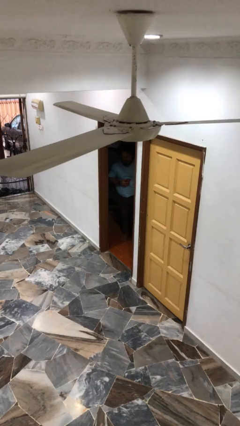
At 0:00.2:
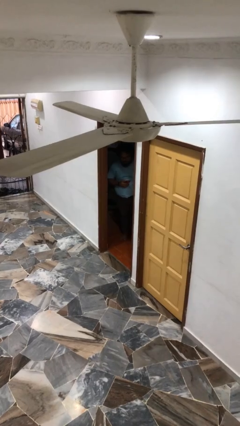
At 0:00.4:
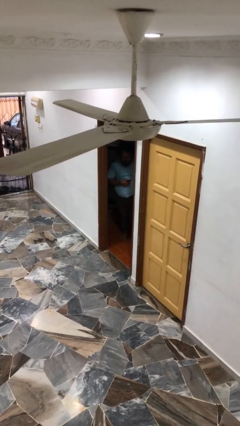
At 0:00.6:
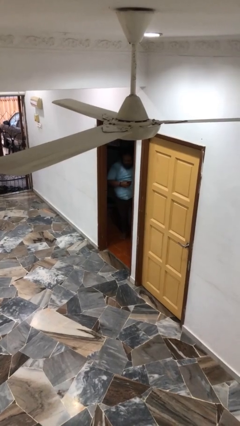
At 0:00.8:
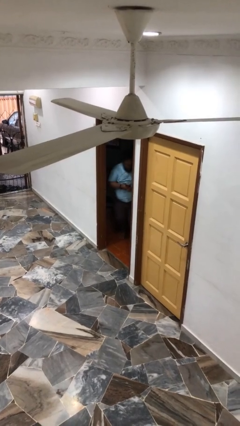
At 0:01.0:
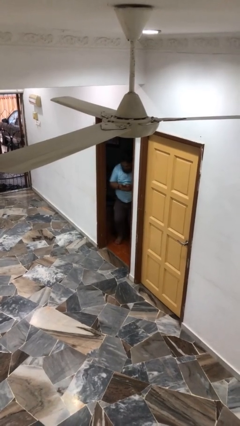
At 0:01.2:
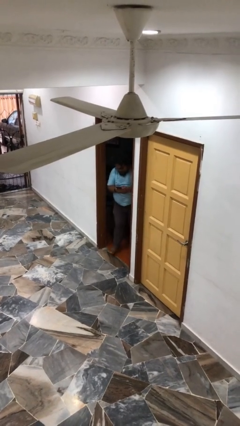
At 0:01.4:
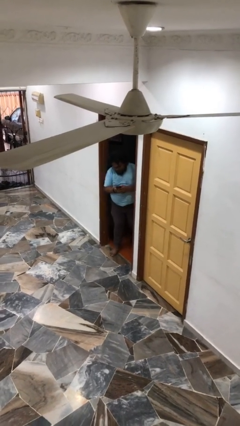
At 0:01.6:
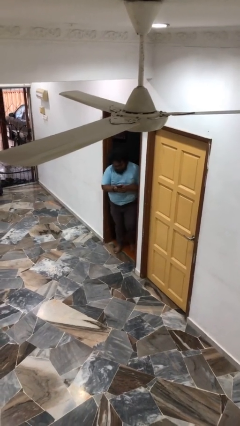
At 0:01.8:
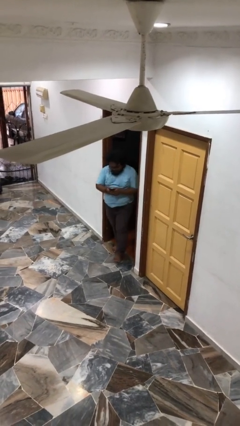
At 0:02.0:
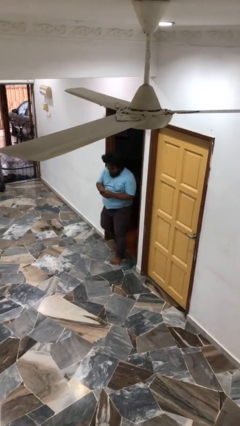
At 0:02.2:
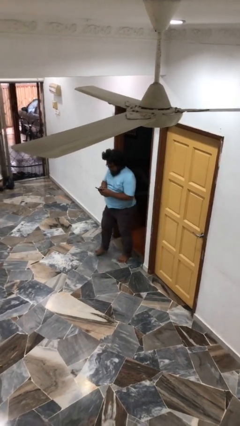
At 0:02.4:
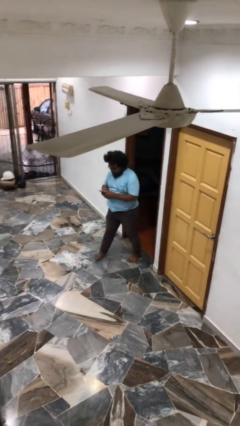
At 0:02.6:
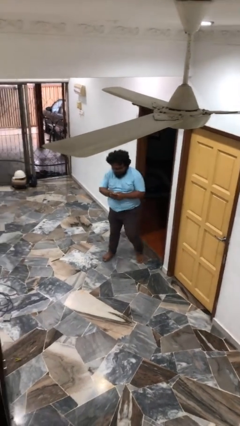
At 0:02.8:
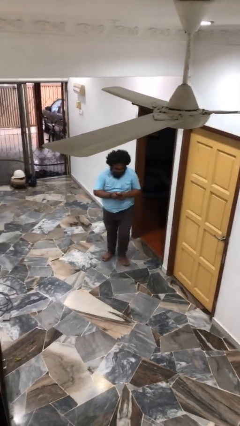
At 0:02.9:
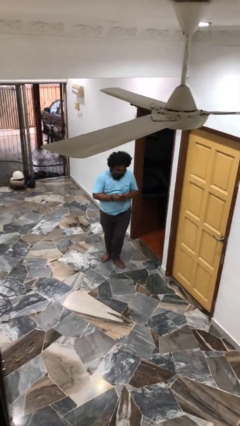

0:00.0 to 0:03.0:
person enters scene through structure

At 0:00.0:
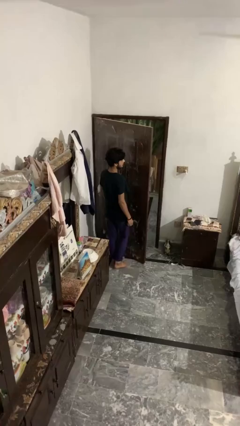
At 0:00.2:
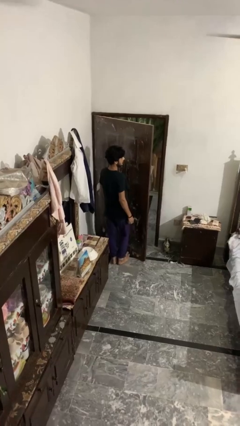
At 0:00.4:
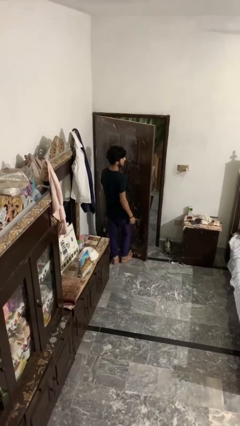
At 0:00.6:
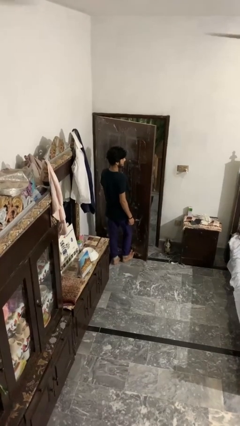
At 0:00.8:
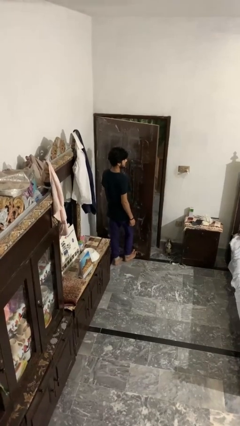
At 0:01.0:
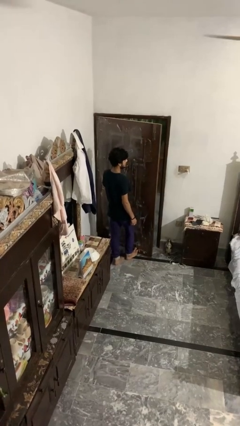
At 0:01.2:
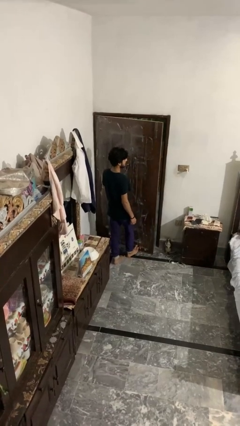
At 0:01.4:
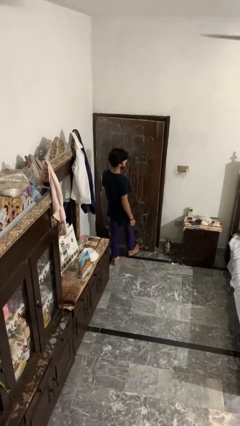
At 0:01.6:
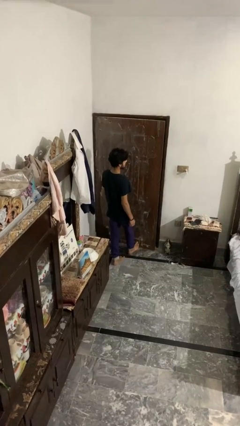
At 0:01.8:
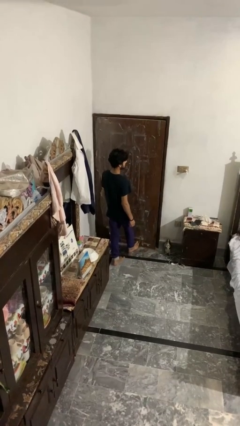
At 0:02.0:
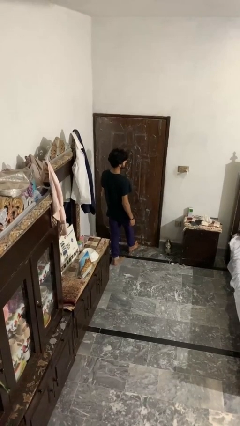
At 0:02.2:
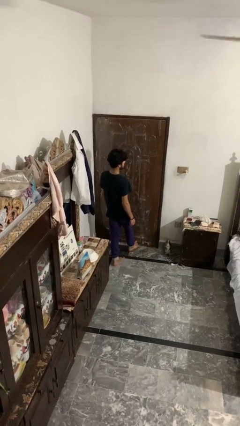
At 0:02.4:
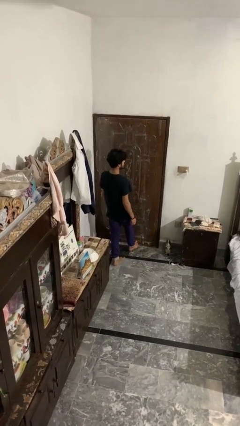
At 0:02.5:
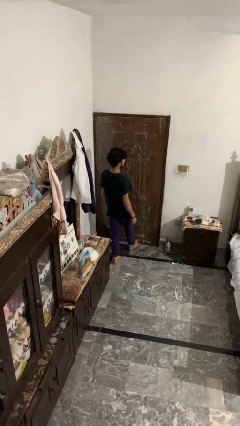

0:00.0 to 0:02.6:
person closes door with foot

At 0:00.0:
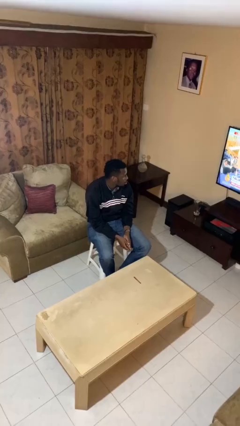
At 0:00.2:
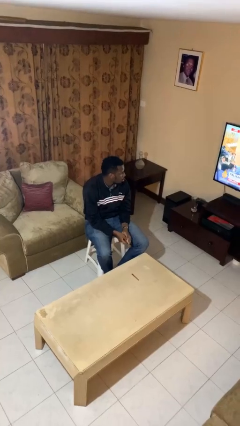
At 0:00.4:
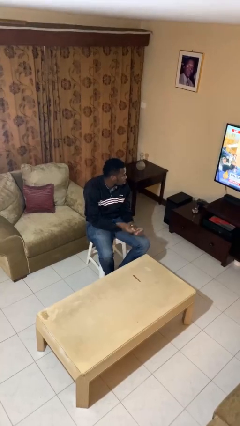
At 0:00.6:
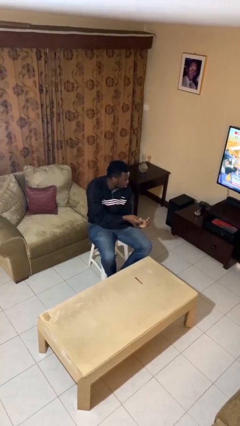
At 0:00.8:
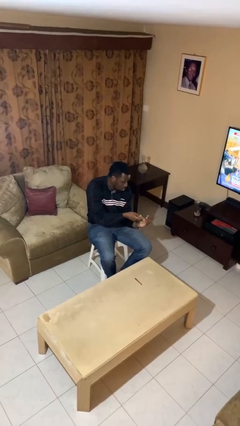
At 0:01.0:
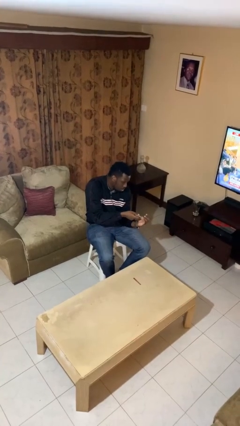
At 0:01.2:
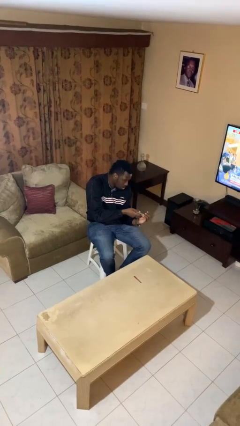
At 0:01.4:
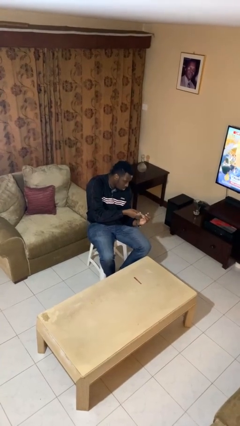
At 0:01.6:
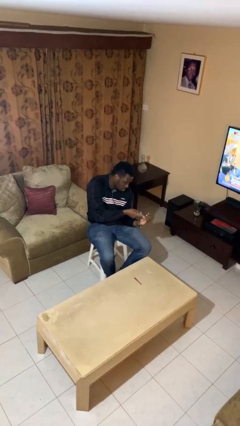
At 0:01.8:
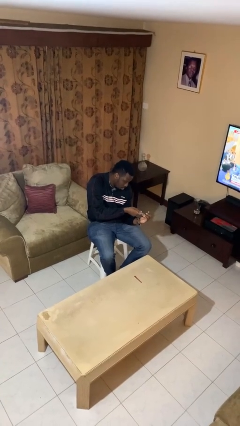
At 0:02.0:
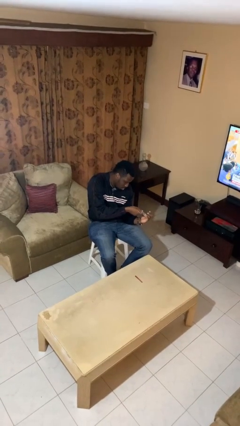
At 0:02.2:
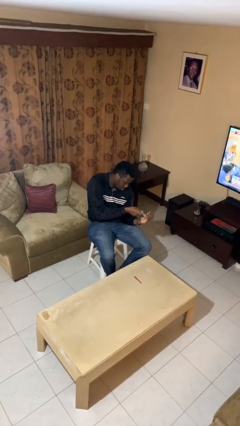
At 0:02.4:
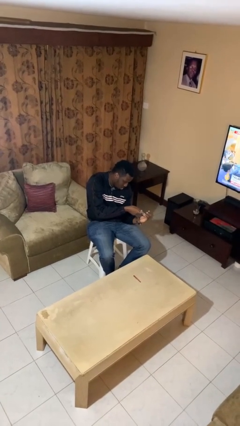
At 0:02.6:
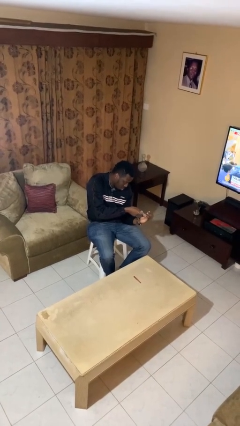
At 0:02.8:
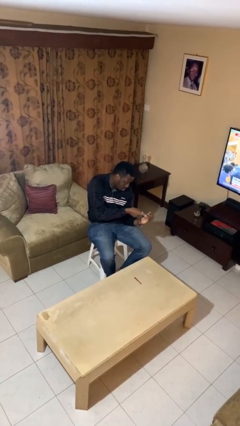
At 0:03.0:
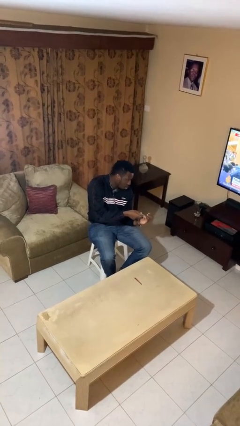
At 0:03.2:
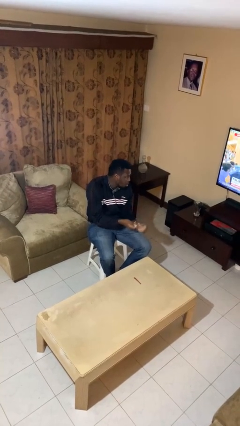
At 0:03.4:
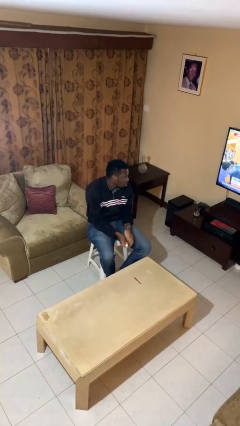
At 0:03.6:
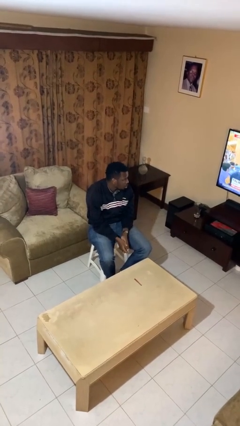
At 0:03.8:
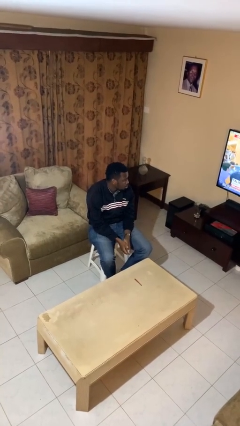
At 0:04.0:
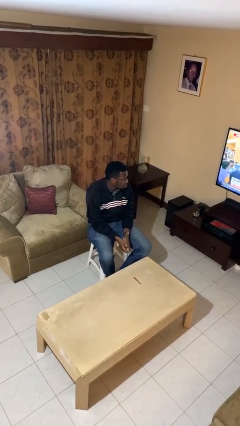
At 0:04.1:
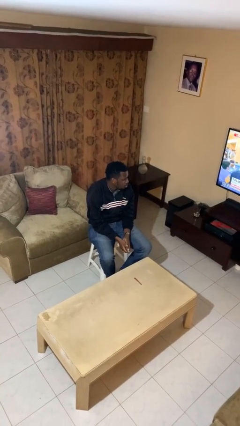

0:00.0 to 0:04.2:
person clips fingernails

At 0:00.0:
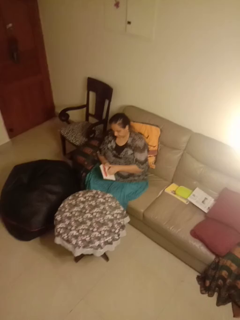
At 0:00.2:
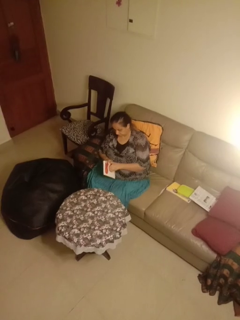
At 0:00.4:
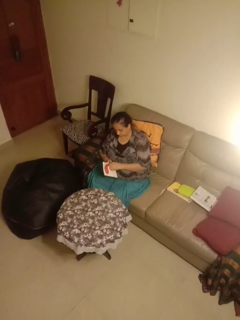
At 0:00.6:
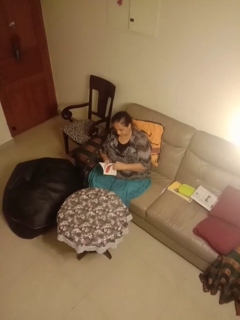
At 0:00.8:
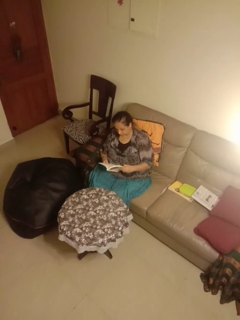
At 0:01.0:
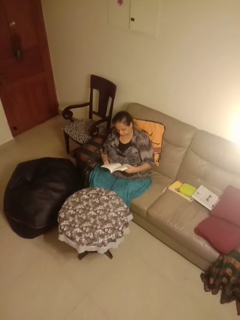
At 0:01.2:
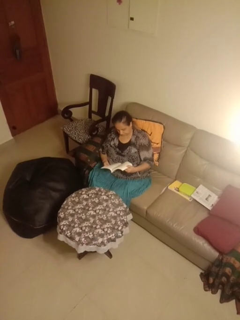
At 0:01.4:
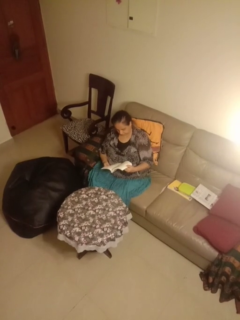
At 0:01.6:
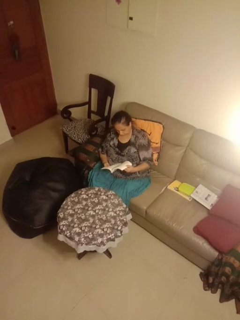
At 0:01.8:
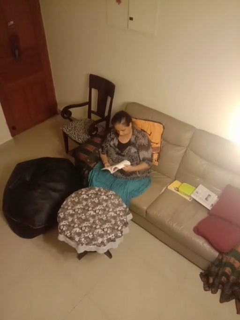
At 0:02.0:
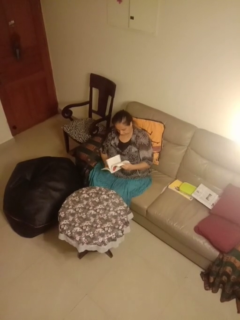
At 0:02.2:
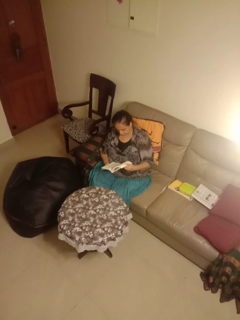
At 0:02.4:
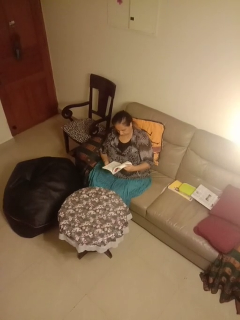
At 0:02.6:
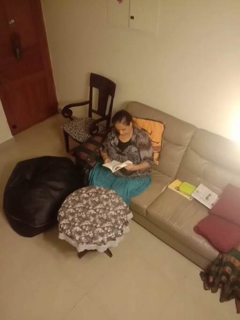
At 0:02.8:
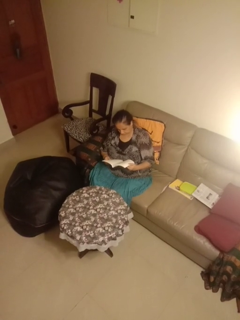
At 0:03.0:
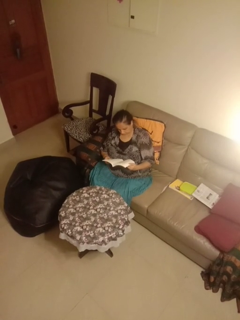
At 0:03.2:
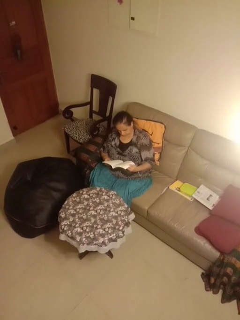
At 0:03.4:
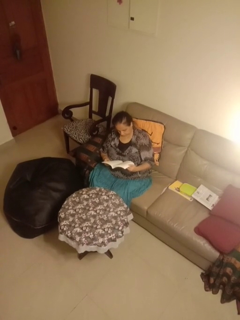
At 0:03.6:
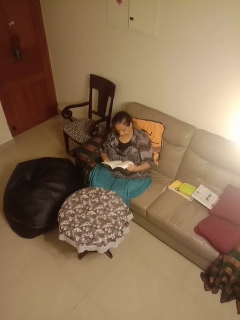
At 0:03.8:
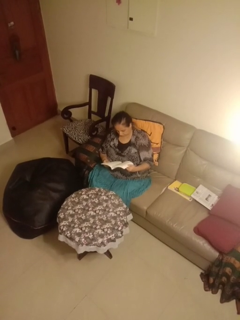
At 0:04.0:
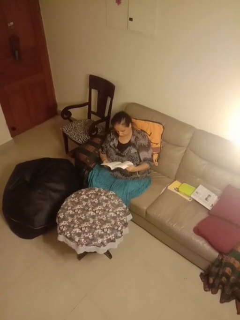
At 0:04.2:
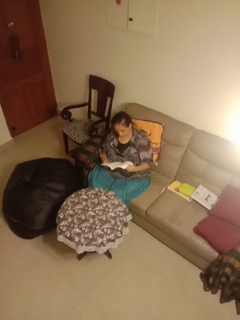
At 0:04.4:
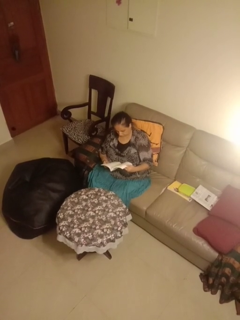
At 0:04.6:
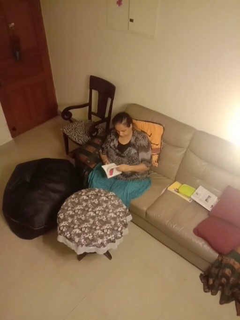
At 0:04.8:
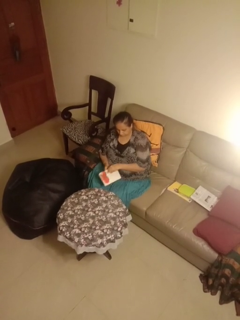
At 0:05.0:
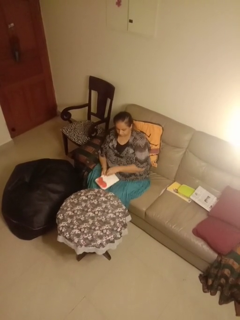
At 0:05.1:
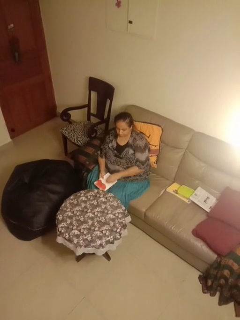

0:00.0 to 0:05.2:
person reads book

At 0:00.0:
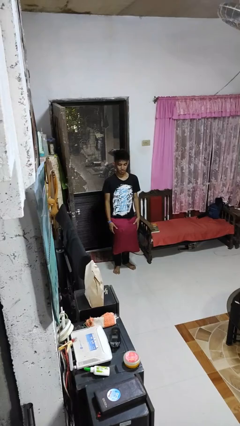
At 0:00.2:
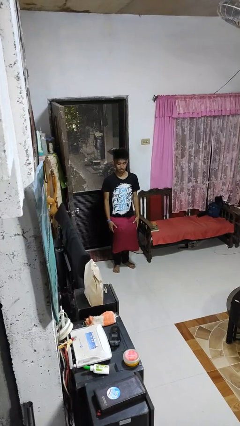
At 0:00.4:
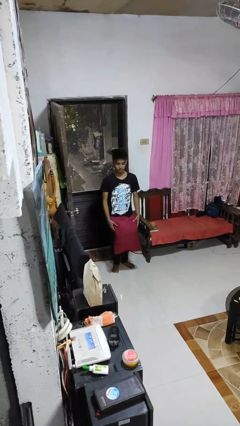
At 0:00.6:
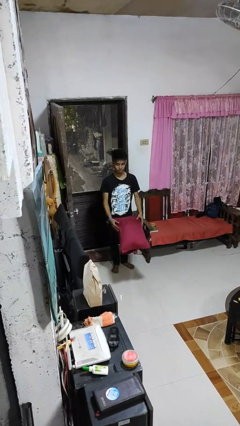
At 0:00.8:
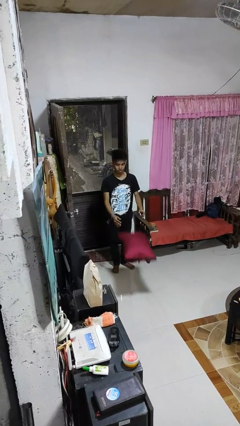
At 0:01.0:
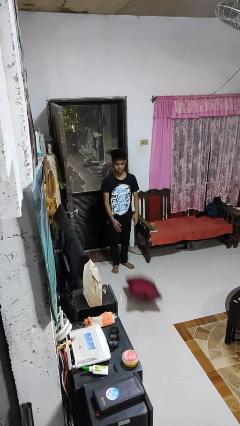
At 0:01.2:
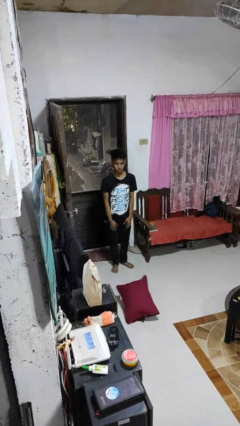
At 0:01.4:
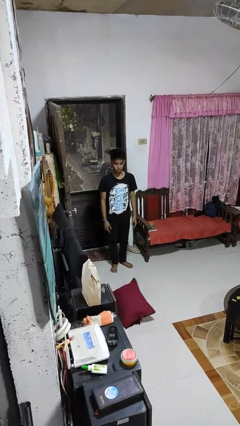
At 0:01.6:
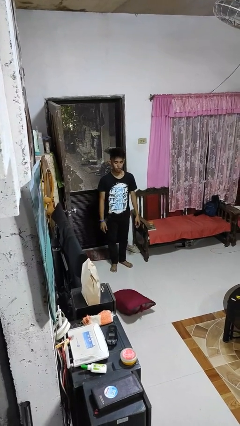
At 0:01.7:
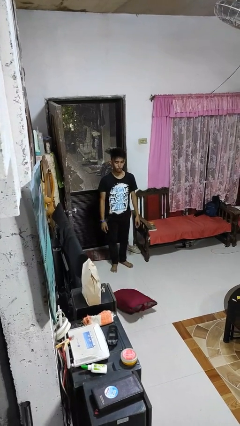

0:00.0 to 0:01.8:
person throws object to ground

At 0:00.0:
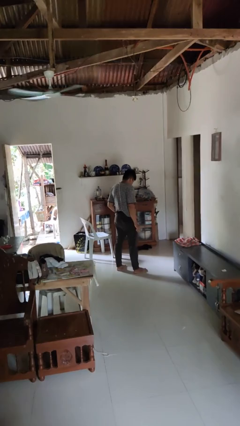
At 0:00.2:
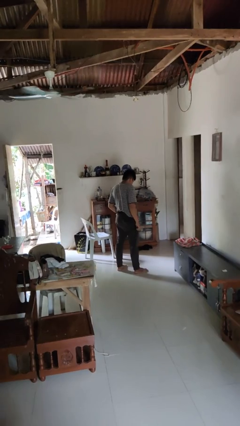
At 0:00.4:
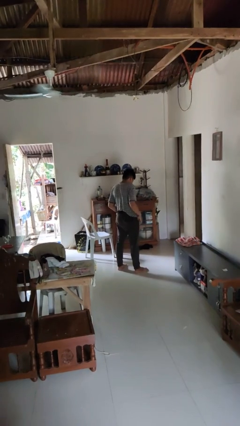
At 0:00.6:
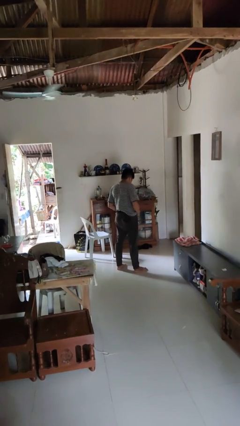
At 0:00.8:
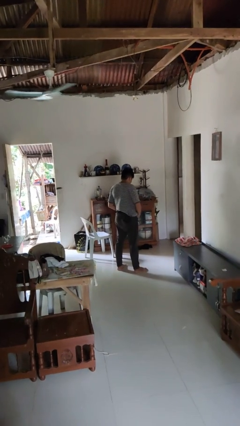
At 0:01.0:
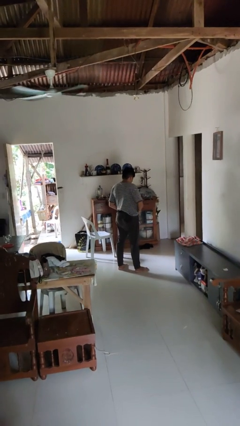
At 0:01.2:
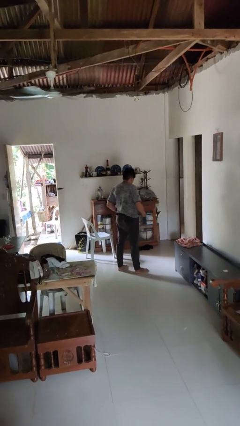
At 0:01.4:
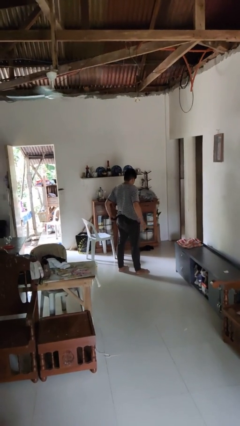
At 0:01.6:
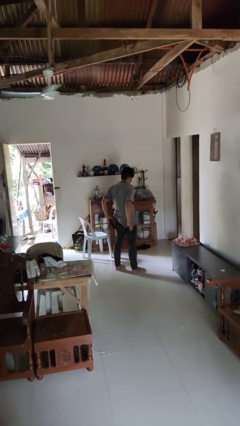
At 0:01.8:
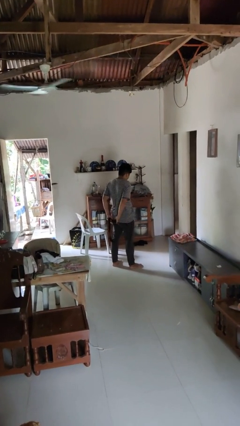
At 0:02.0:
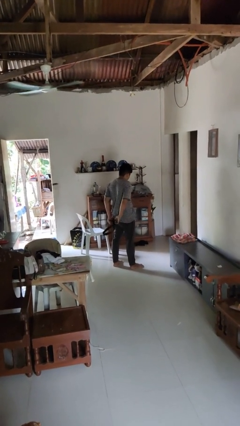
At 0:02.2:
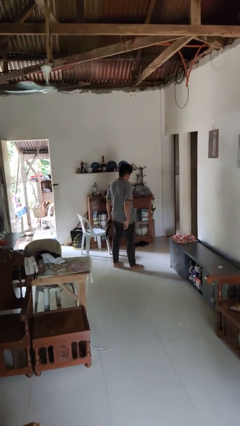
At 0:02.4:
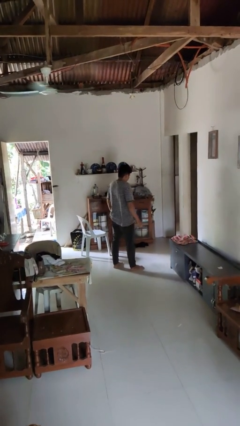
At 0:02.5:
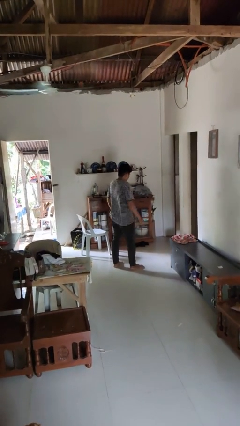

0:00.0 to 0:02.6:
person takes off belt
